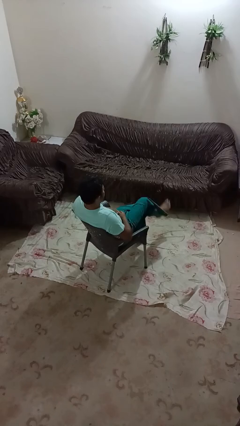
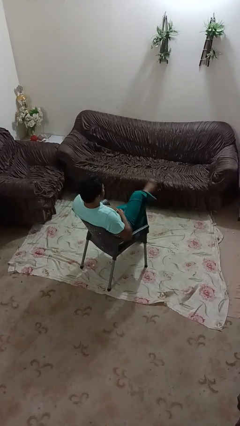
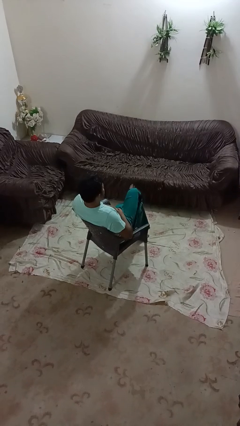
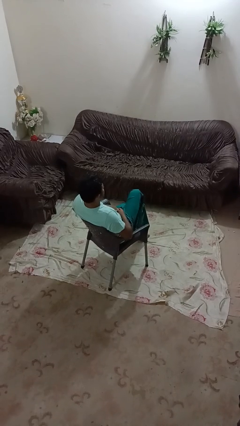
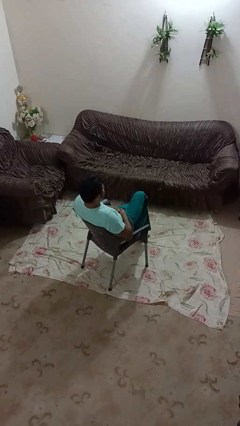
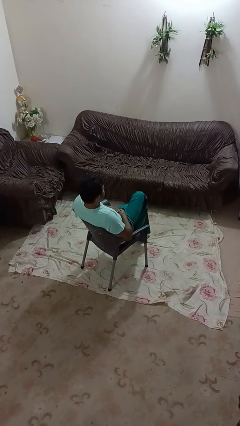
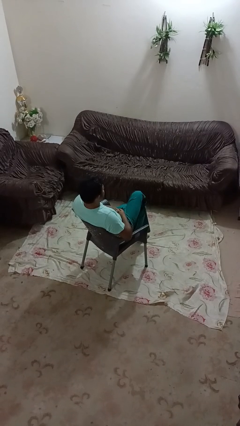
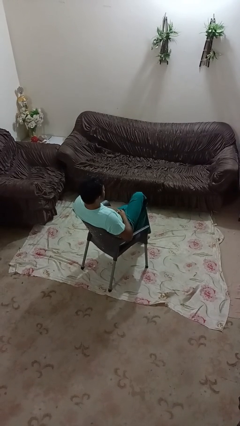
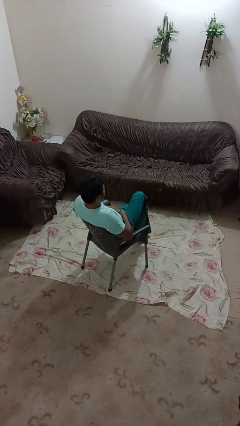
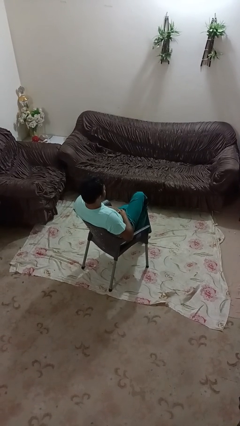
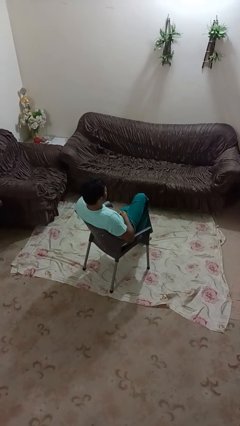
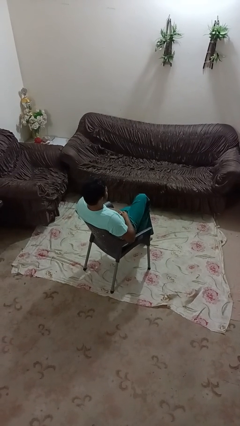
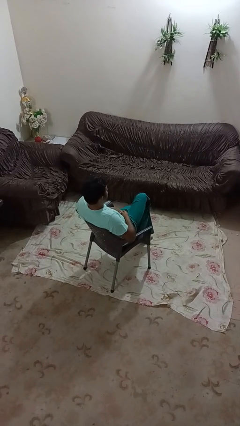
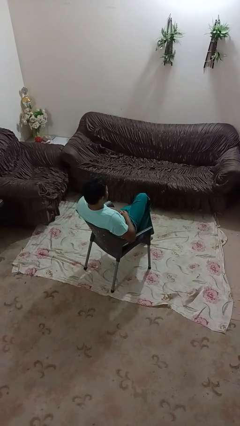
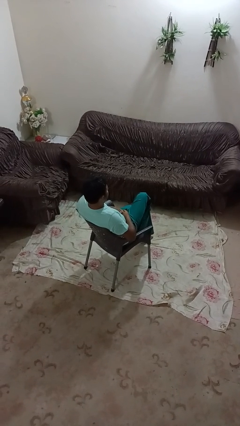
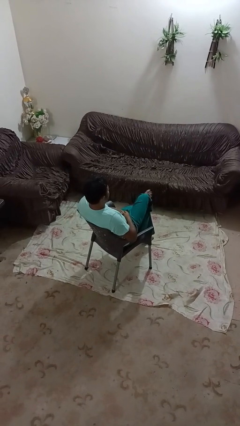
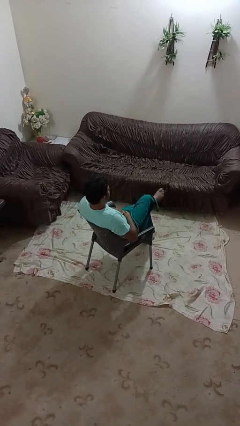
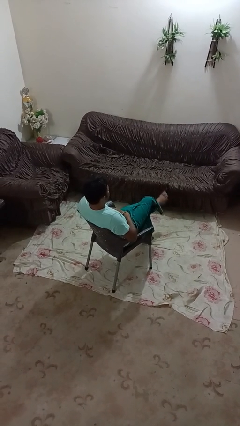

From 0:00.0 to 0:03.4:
person crosses legs

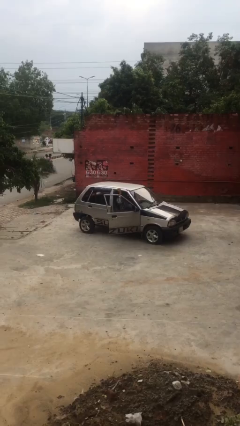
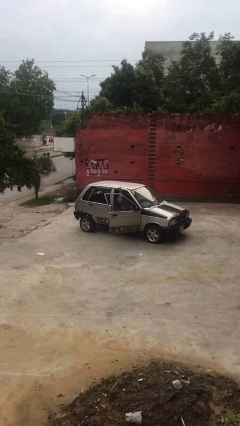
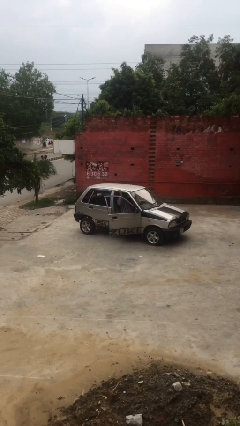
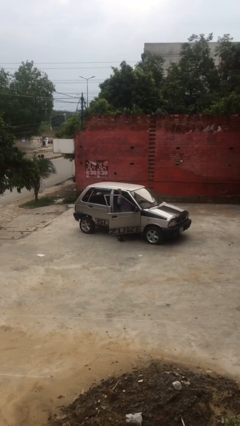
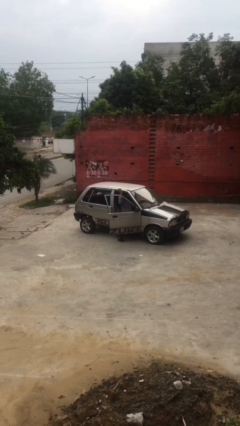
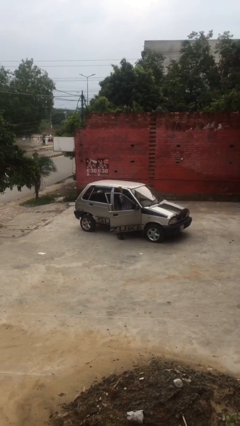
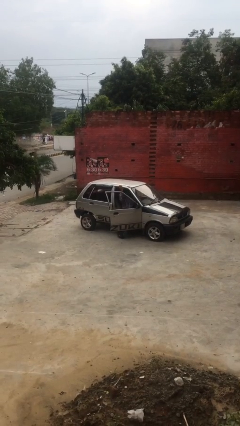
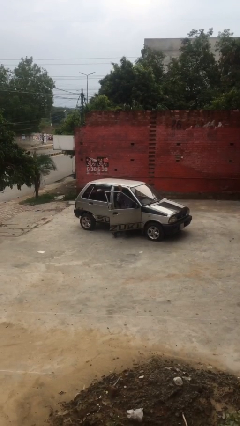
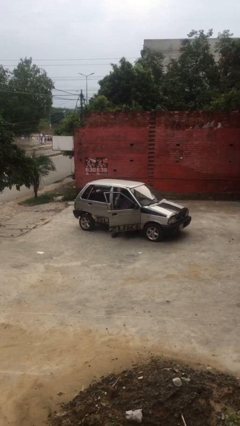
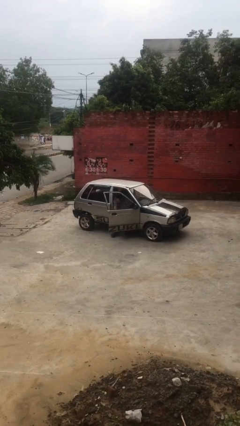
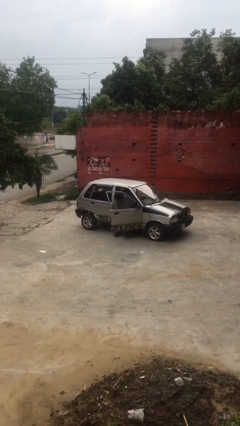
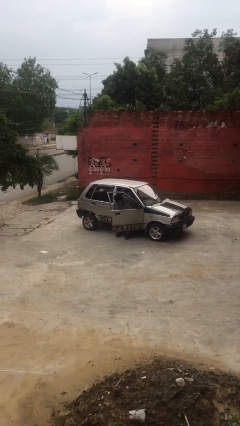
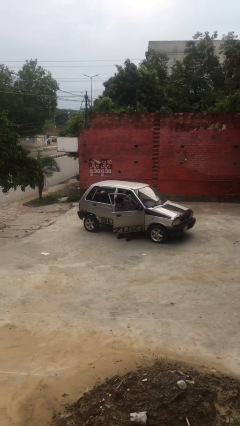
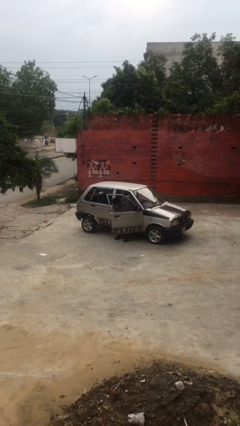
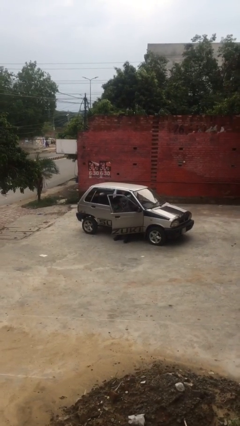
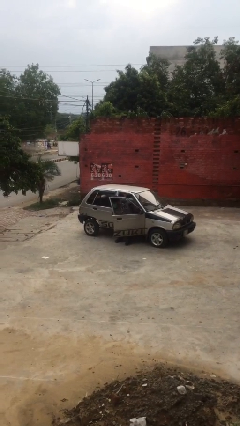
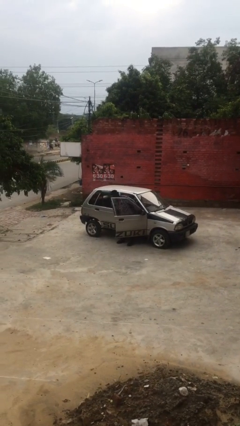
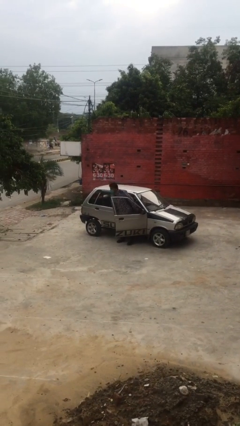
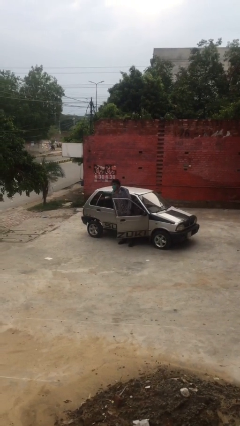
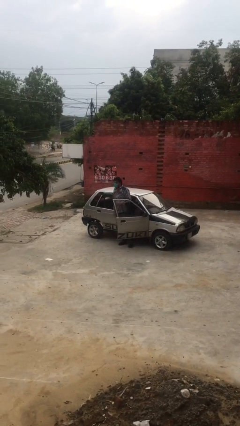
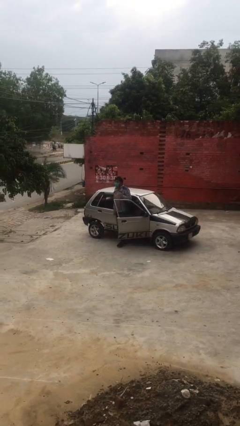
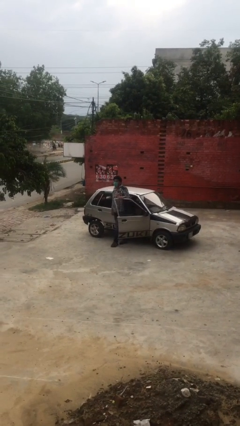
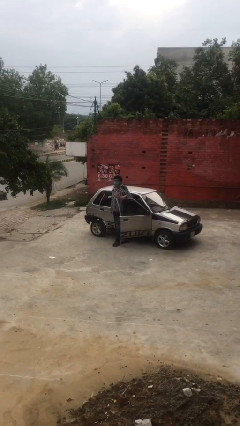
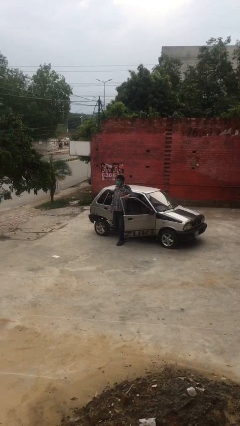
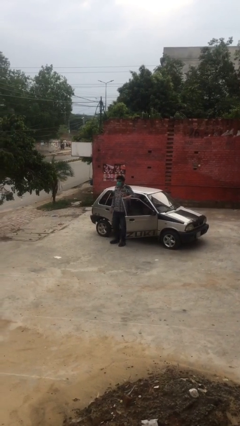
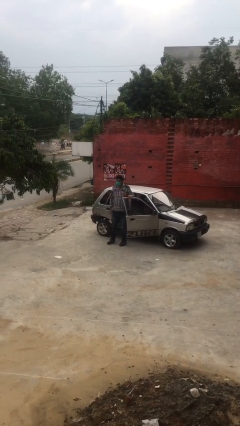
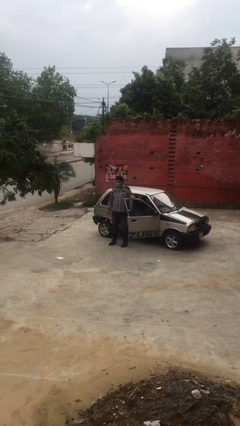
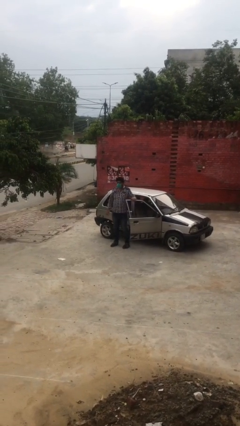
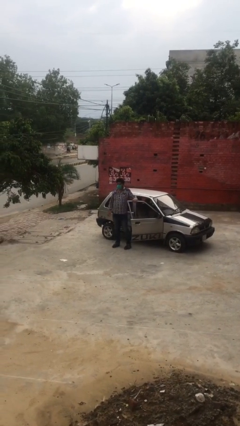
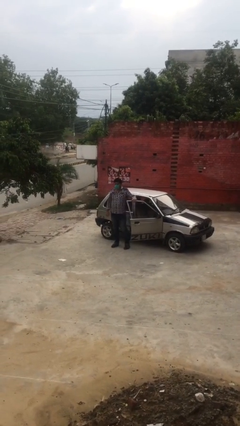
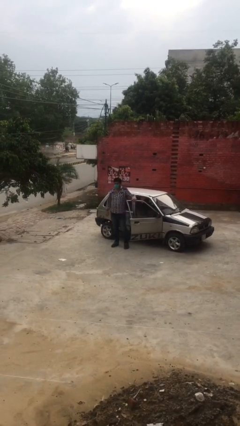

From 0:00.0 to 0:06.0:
person exits car

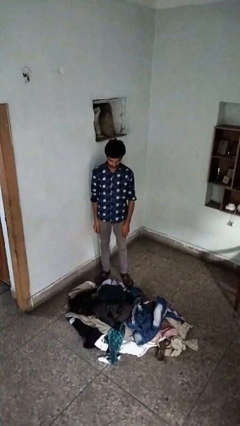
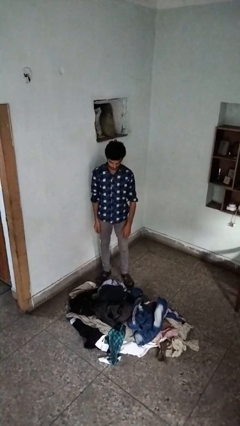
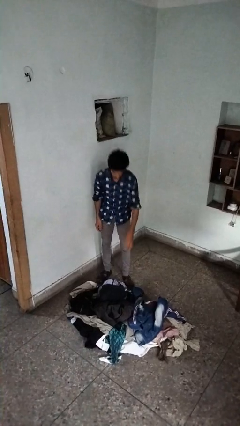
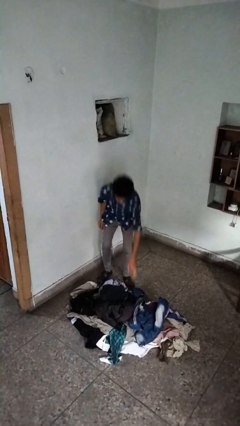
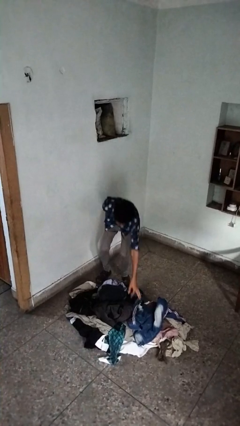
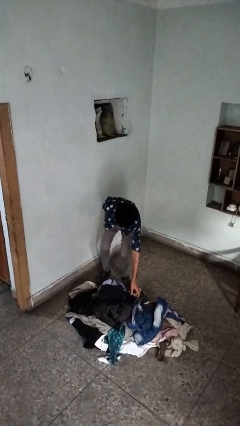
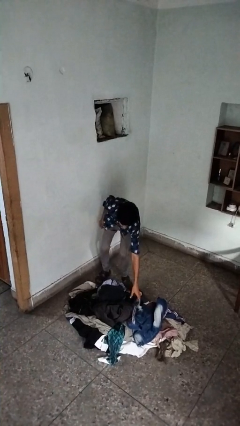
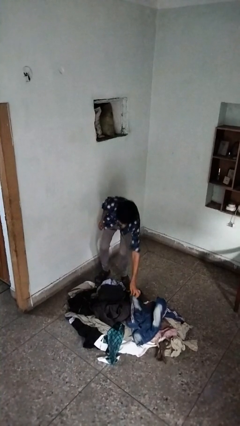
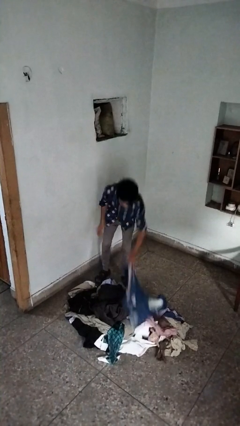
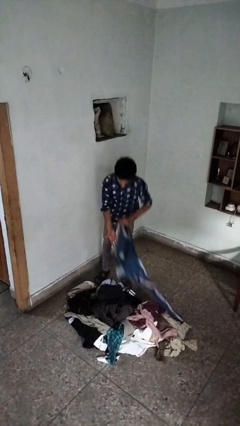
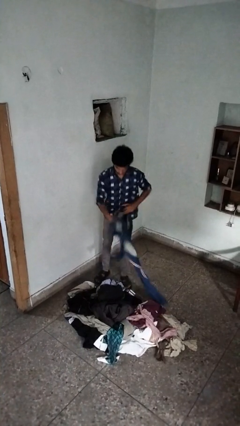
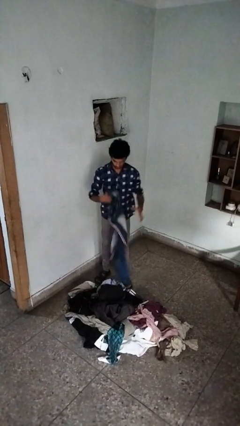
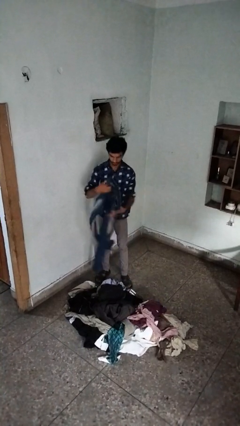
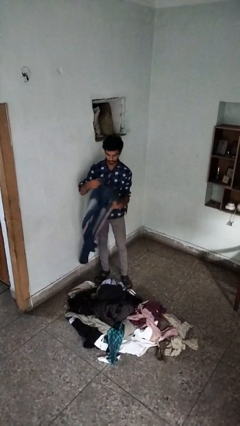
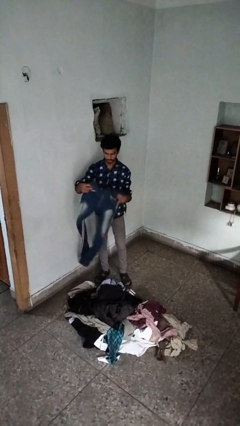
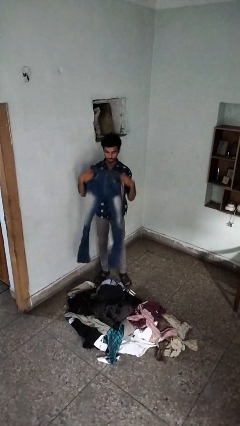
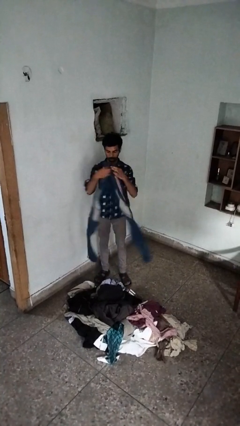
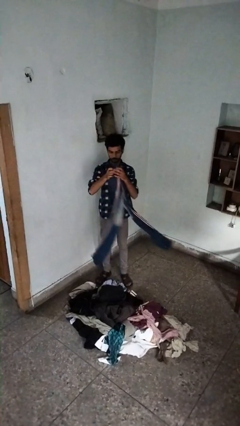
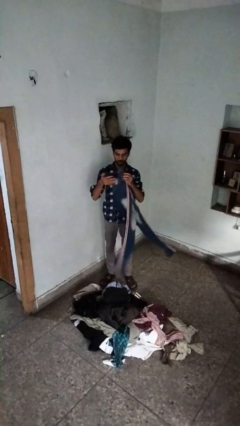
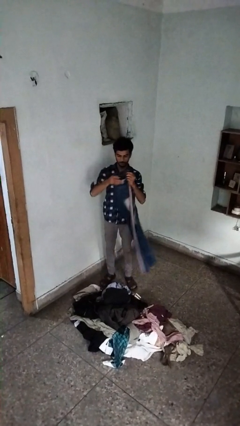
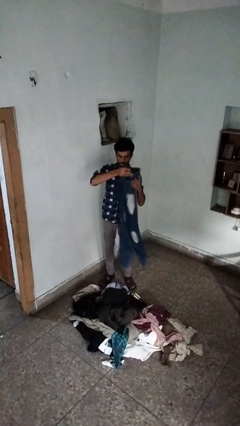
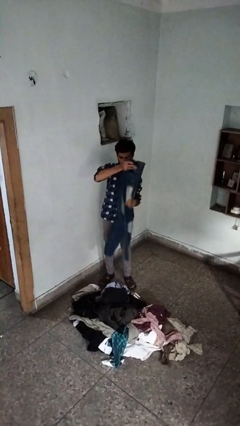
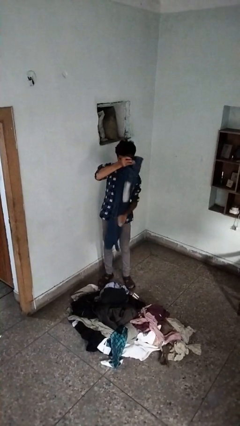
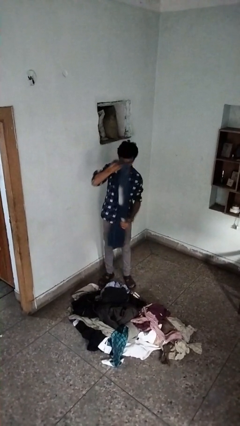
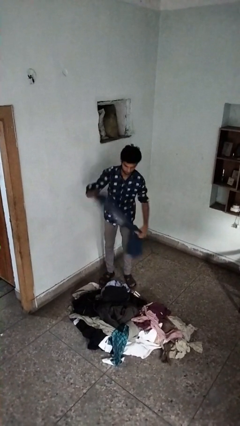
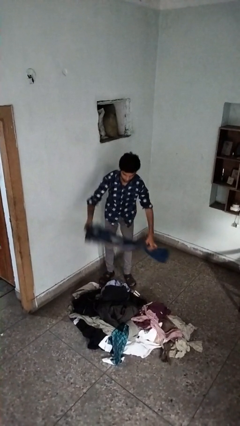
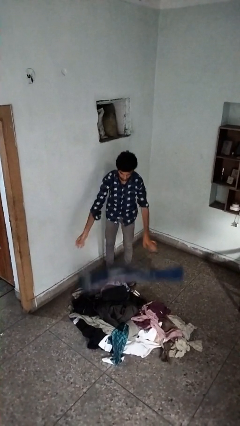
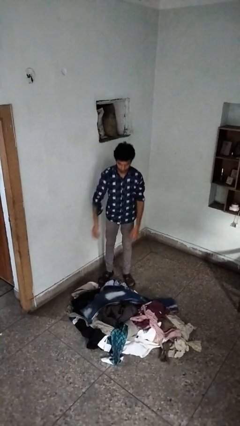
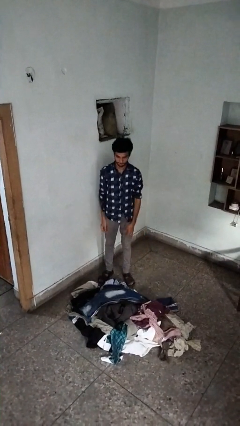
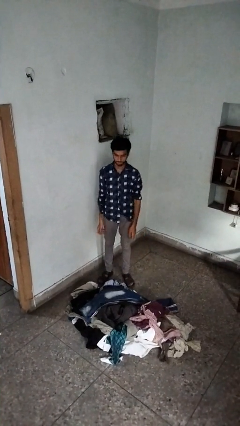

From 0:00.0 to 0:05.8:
person folds pants

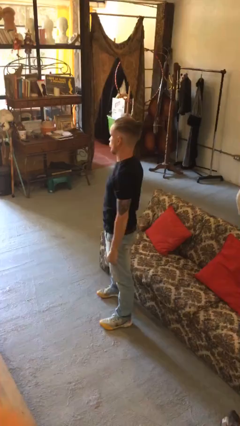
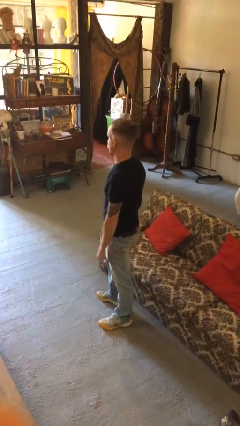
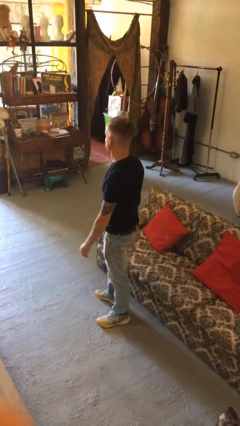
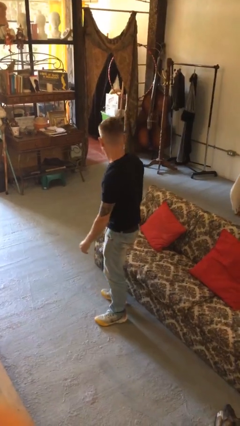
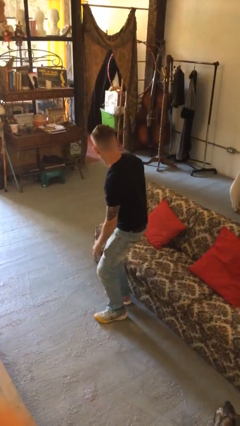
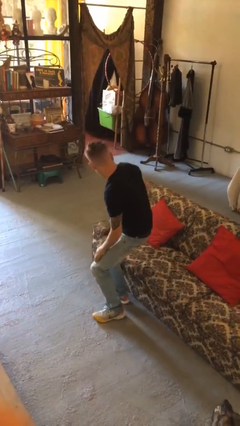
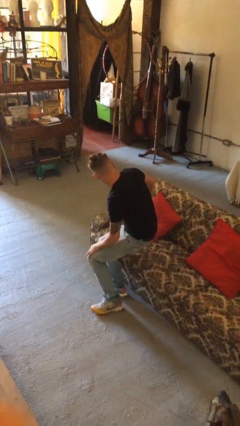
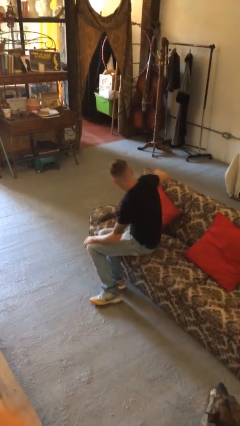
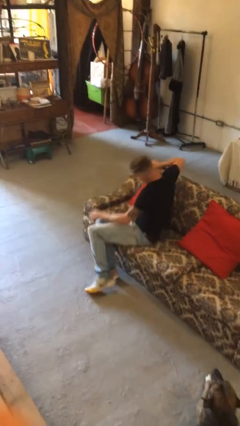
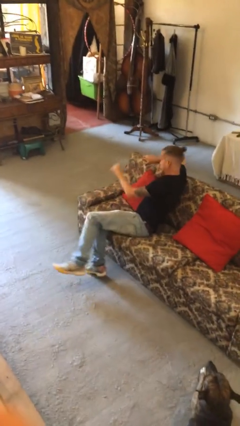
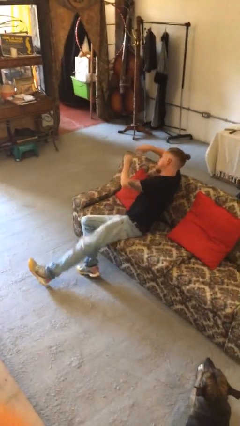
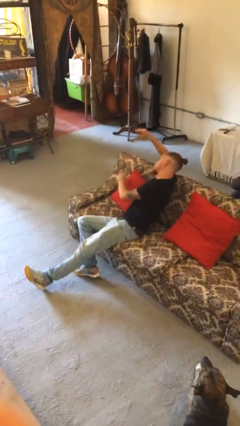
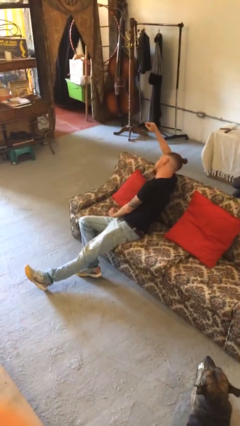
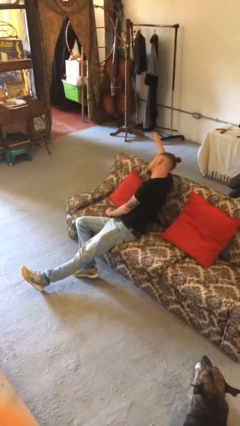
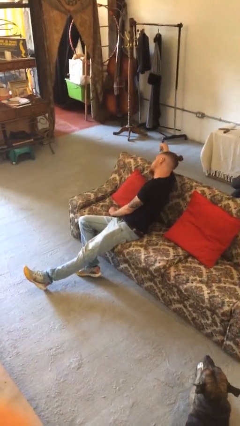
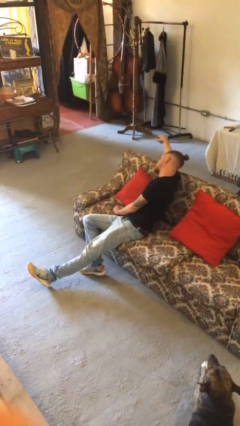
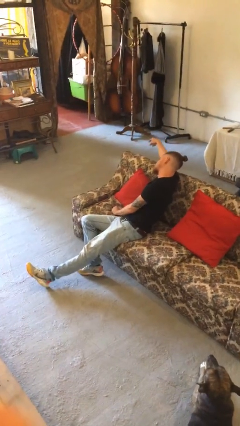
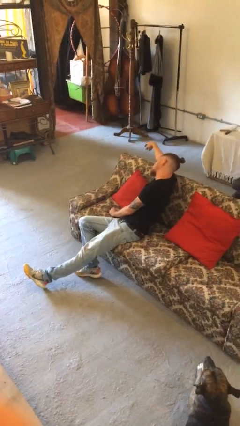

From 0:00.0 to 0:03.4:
person lies down on couch
